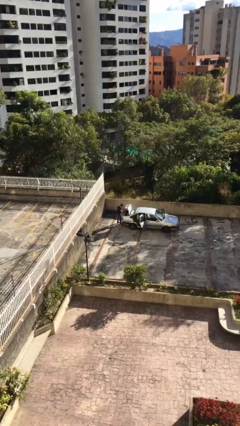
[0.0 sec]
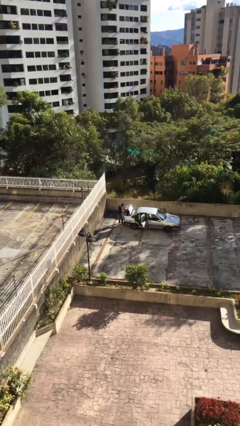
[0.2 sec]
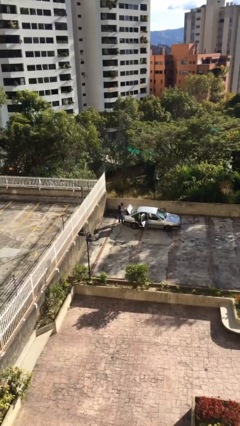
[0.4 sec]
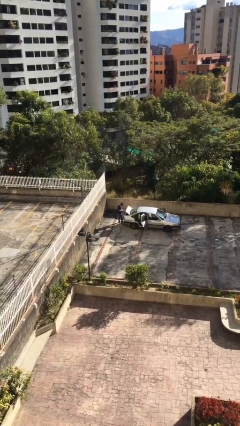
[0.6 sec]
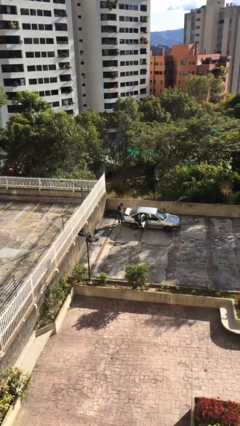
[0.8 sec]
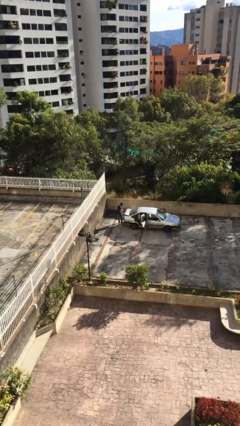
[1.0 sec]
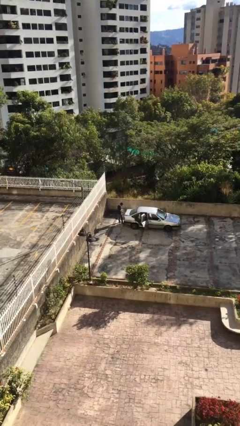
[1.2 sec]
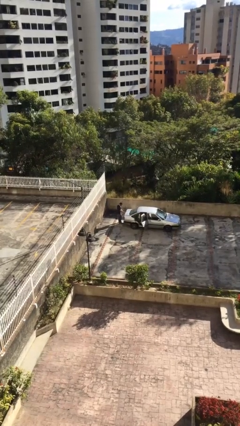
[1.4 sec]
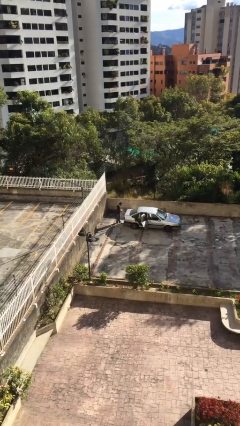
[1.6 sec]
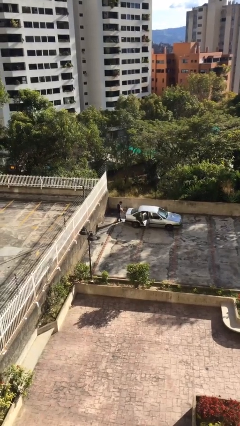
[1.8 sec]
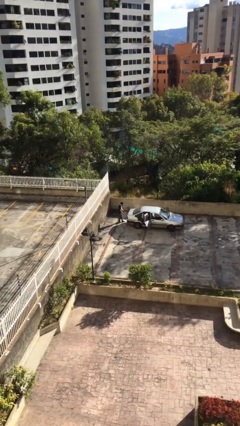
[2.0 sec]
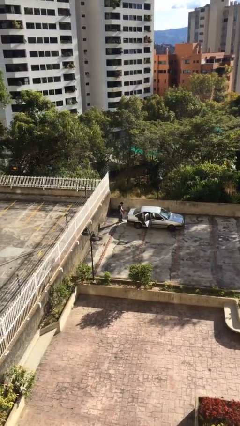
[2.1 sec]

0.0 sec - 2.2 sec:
person closes car trunk

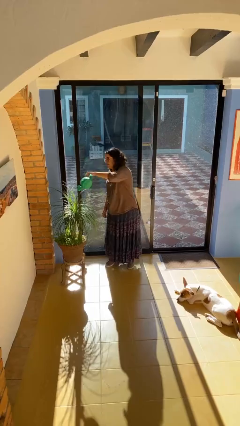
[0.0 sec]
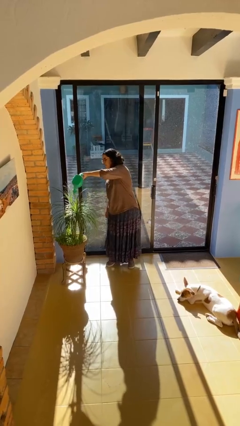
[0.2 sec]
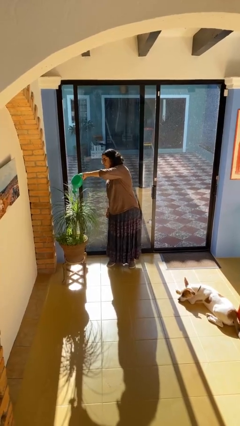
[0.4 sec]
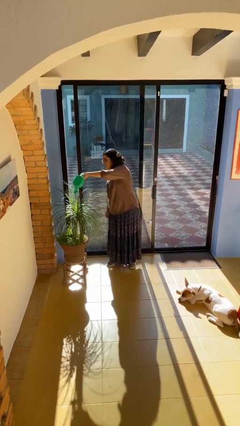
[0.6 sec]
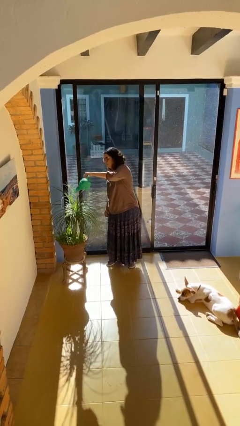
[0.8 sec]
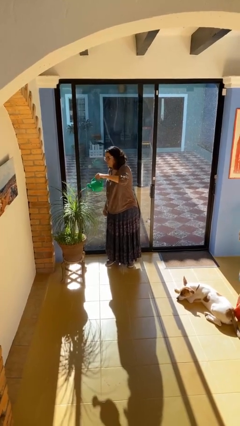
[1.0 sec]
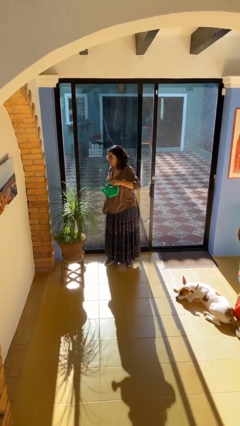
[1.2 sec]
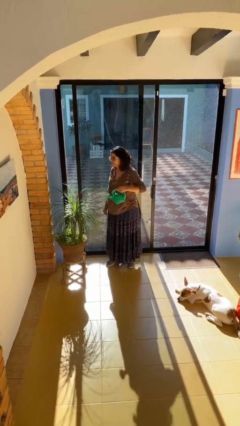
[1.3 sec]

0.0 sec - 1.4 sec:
person waters houseplant

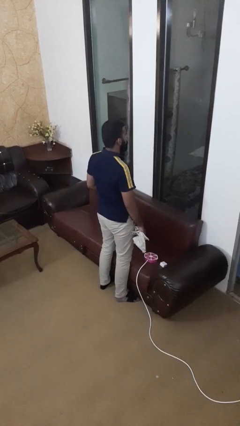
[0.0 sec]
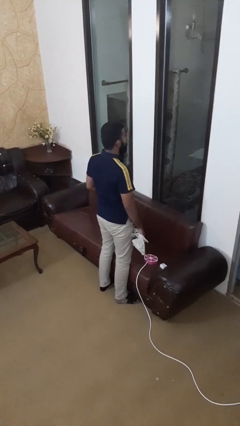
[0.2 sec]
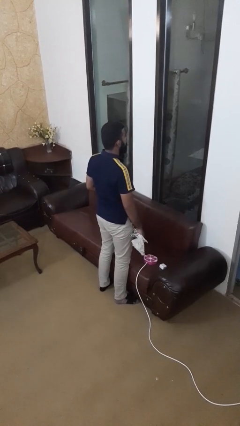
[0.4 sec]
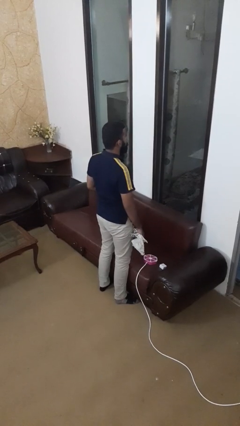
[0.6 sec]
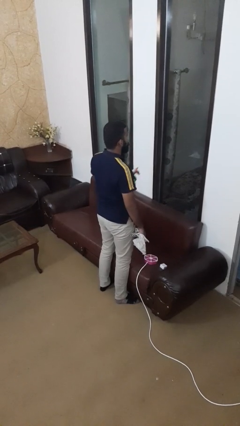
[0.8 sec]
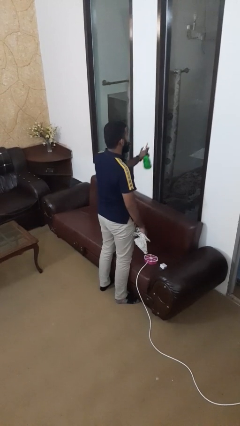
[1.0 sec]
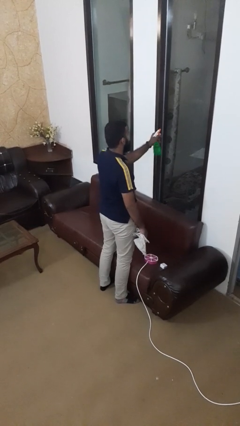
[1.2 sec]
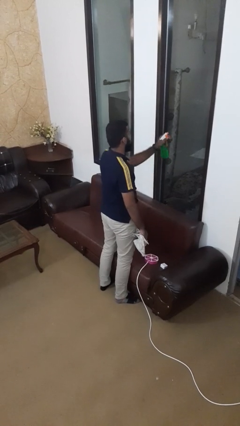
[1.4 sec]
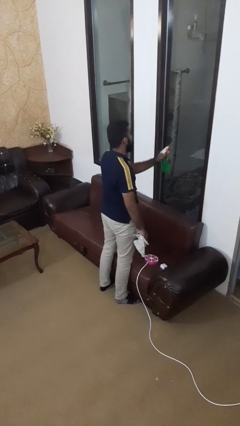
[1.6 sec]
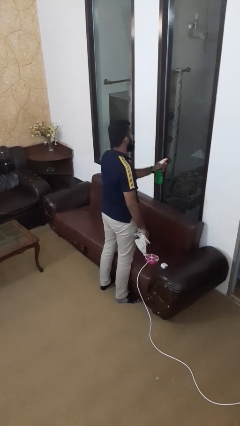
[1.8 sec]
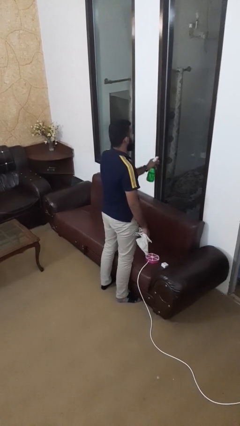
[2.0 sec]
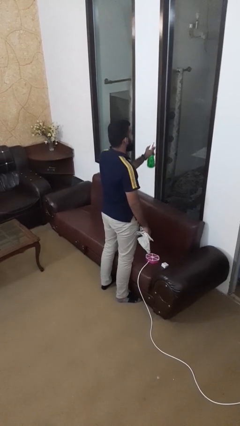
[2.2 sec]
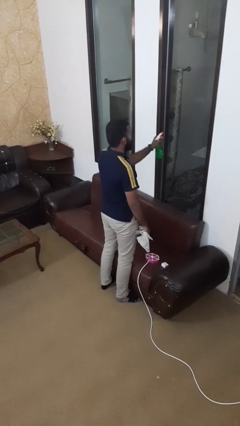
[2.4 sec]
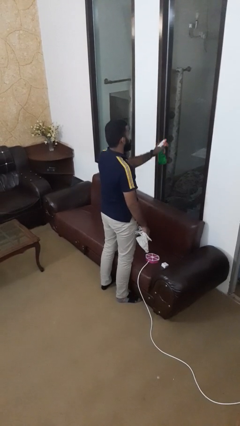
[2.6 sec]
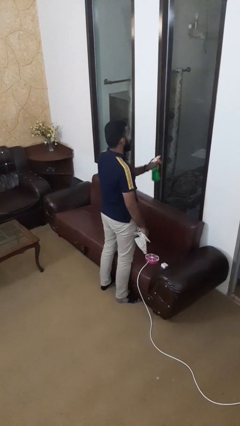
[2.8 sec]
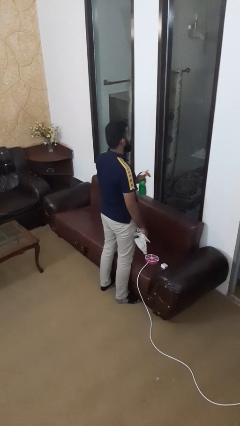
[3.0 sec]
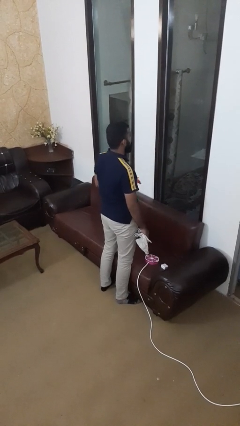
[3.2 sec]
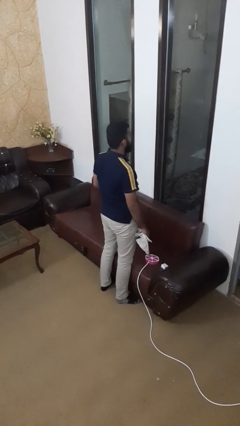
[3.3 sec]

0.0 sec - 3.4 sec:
person sprays from bottle

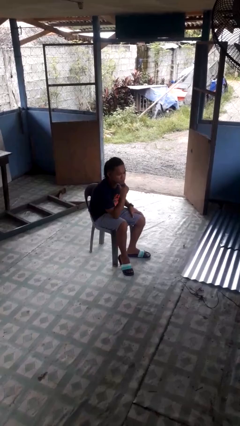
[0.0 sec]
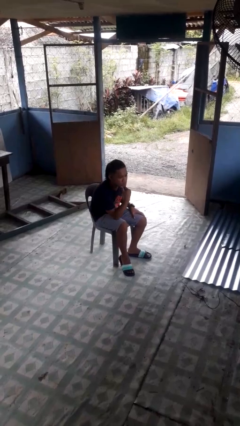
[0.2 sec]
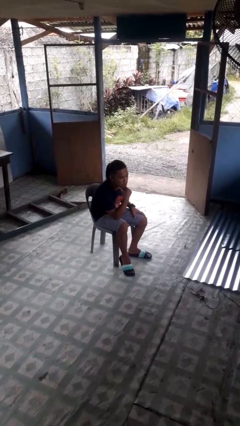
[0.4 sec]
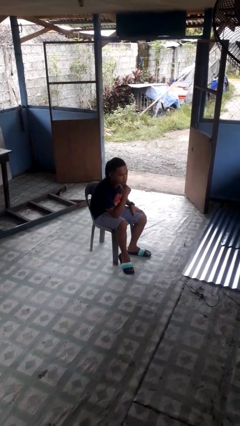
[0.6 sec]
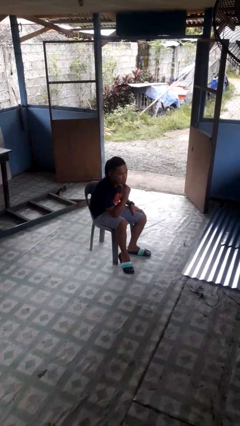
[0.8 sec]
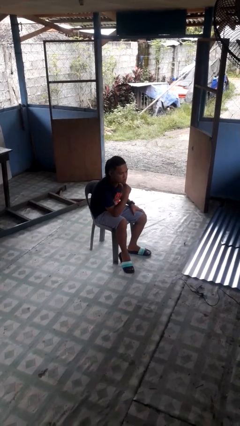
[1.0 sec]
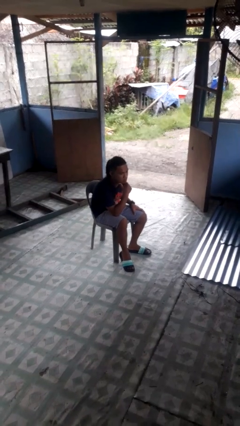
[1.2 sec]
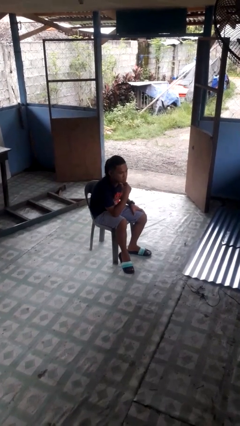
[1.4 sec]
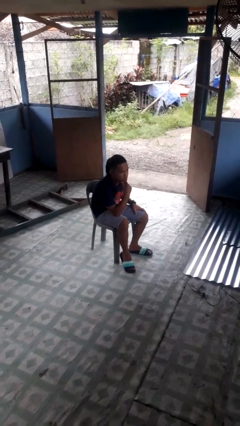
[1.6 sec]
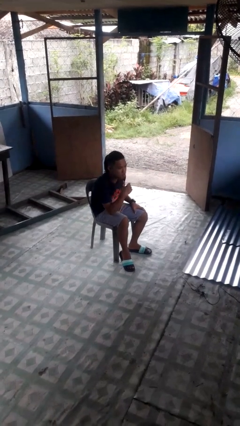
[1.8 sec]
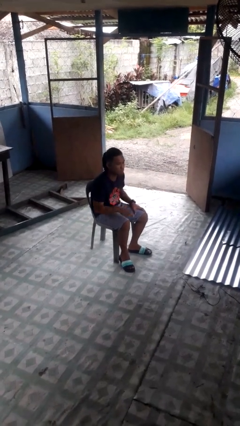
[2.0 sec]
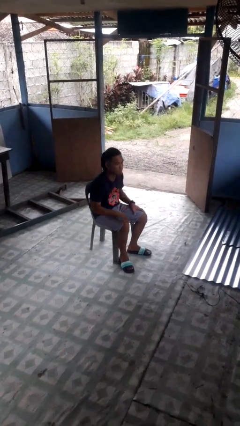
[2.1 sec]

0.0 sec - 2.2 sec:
person strokes chin

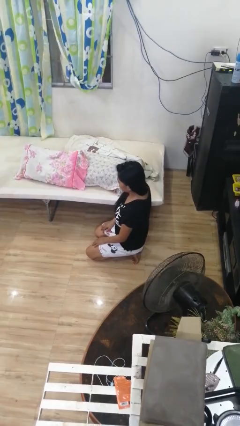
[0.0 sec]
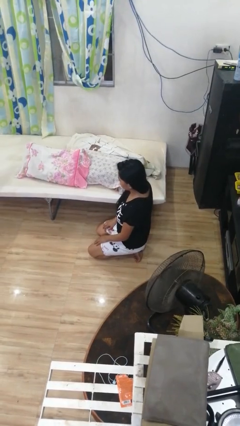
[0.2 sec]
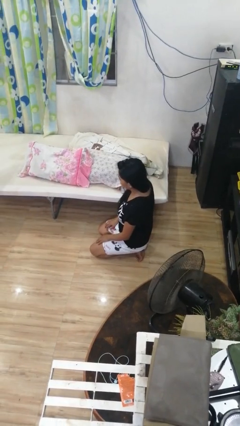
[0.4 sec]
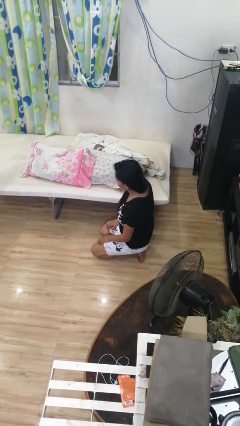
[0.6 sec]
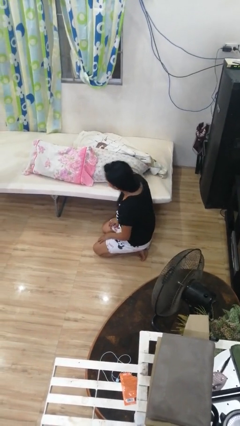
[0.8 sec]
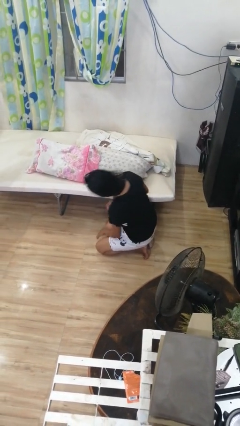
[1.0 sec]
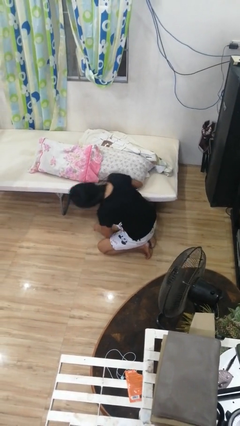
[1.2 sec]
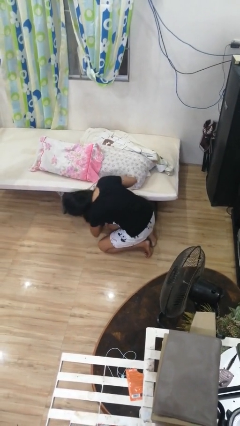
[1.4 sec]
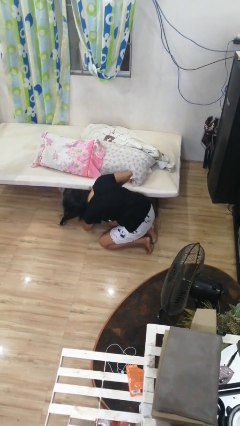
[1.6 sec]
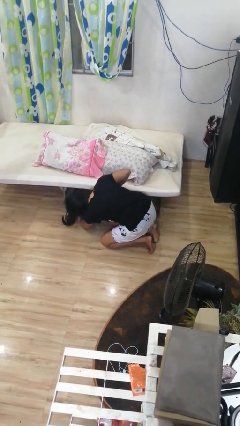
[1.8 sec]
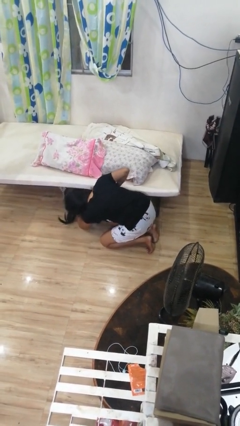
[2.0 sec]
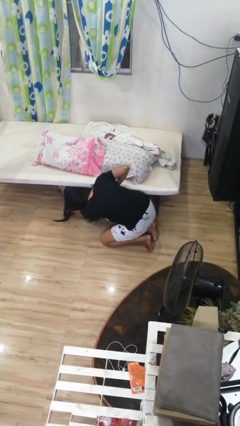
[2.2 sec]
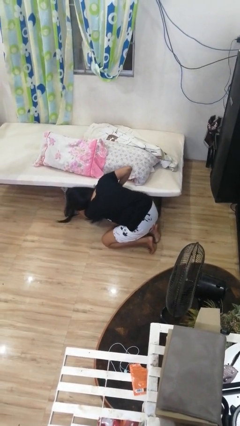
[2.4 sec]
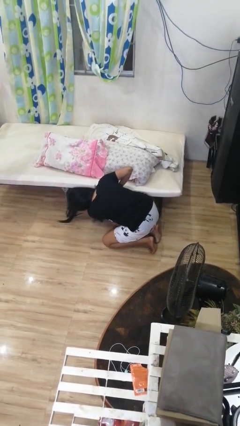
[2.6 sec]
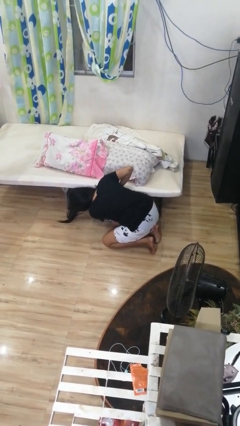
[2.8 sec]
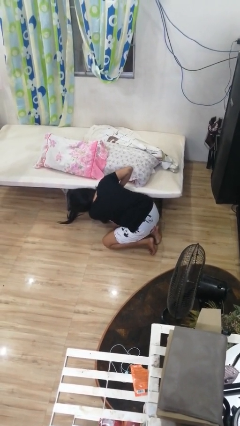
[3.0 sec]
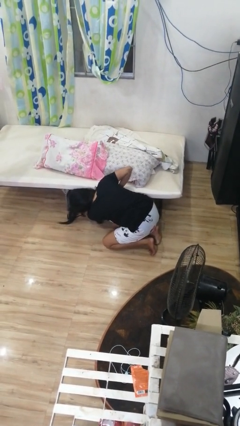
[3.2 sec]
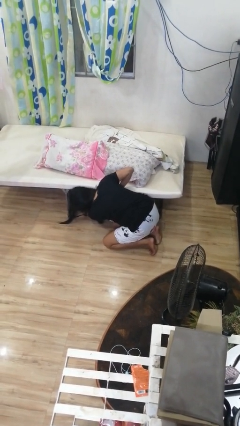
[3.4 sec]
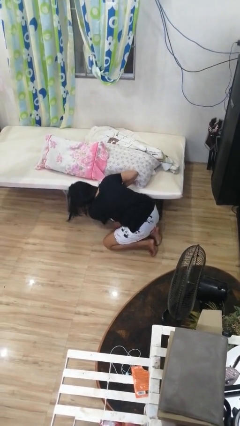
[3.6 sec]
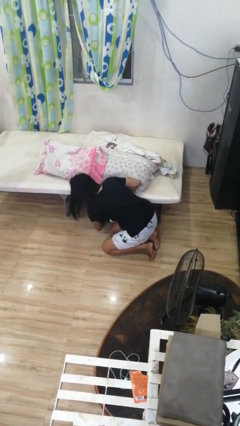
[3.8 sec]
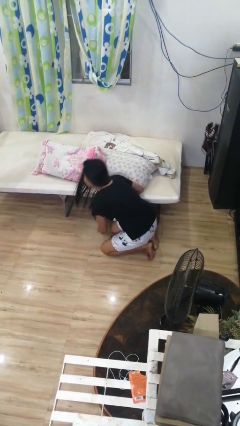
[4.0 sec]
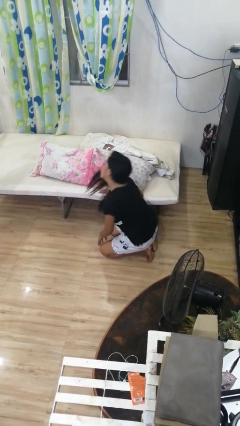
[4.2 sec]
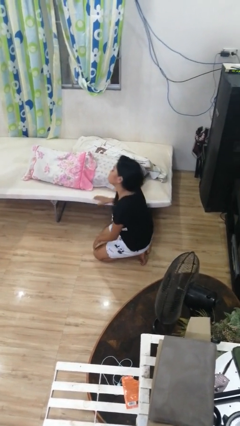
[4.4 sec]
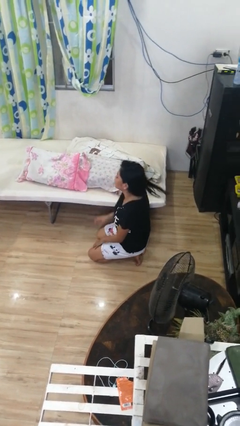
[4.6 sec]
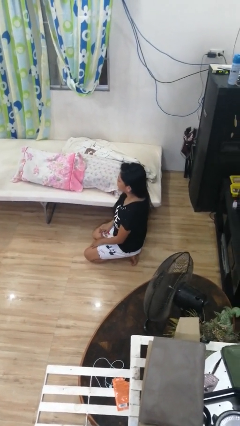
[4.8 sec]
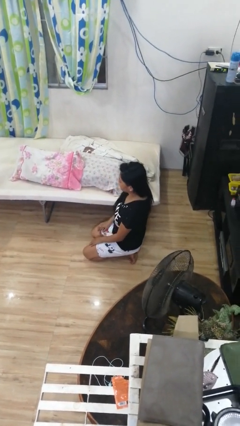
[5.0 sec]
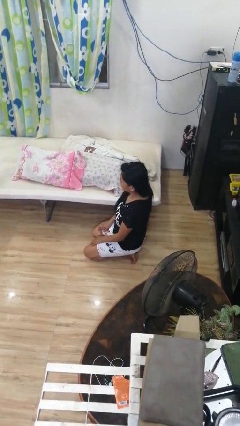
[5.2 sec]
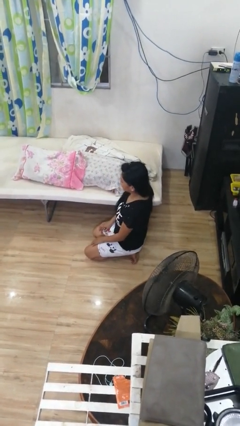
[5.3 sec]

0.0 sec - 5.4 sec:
person searches under bed

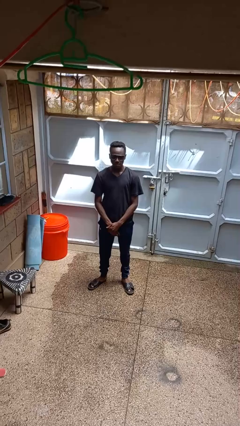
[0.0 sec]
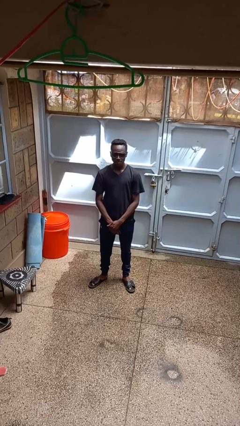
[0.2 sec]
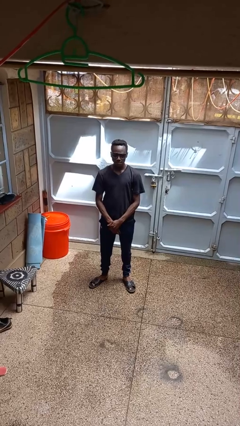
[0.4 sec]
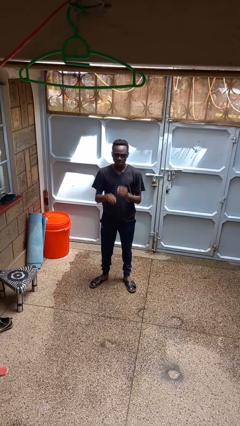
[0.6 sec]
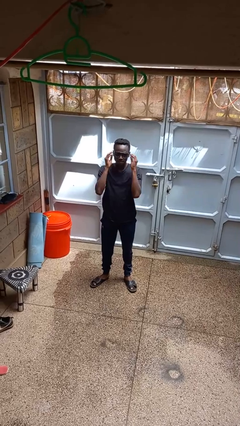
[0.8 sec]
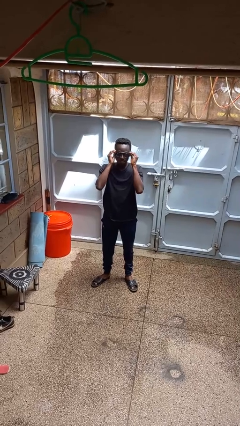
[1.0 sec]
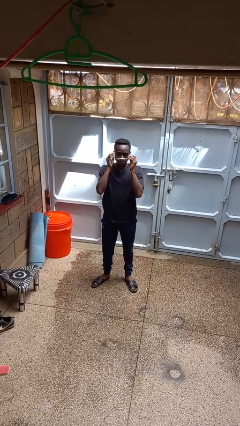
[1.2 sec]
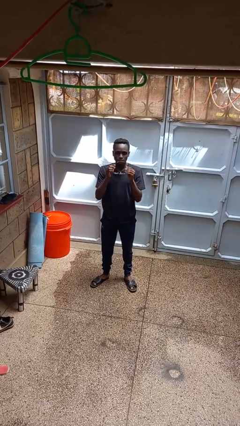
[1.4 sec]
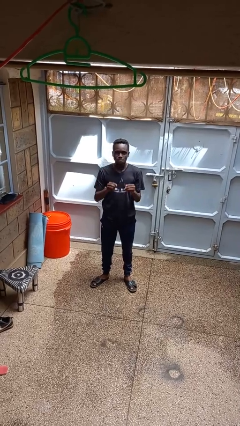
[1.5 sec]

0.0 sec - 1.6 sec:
person takes off sunglasses

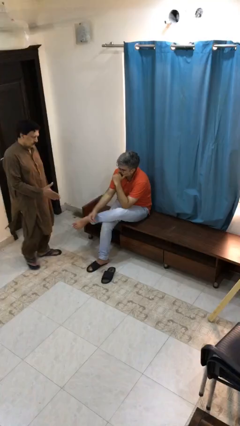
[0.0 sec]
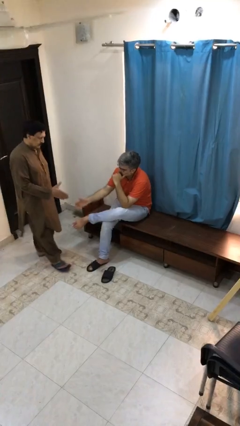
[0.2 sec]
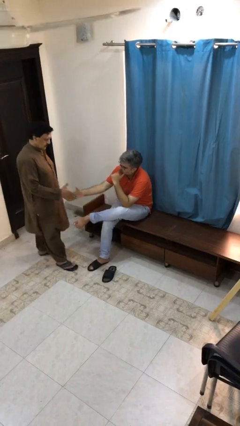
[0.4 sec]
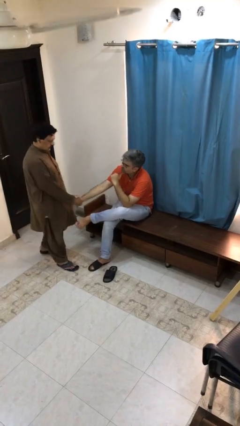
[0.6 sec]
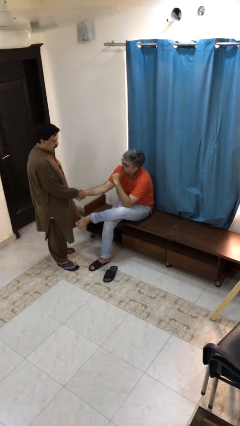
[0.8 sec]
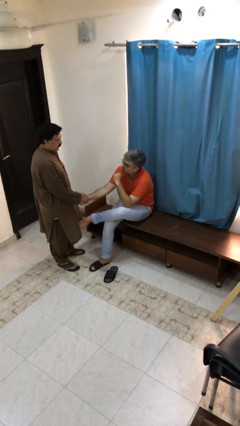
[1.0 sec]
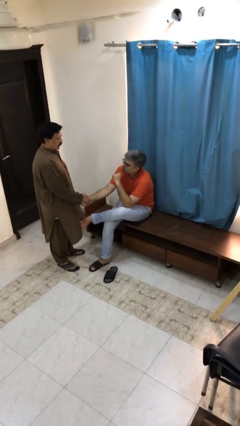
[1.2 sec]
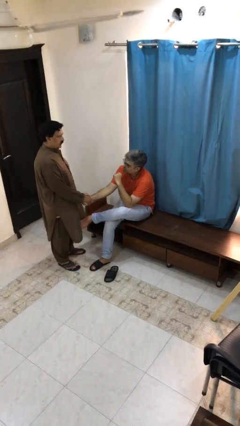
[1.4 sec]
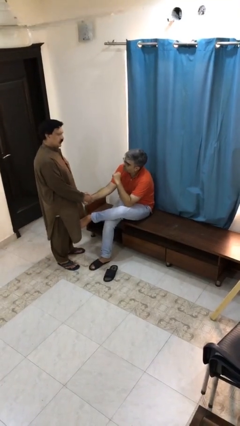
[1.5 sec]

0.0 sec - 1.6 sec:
person shakes hand
